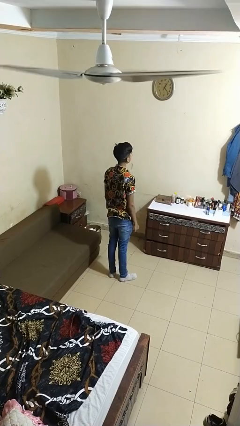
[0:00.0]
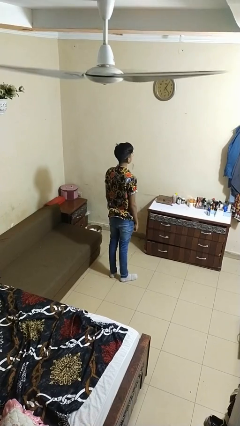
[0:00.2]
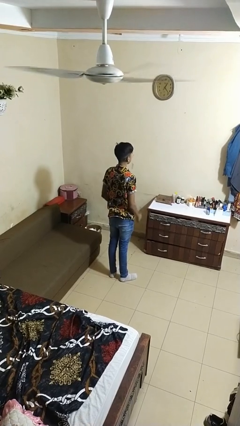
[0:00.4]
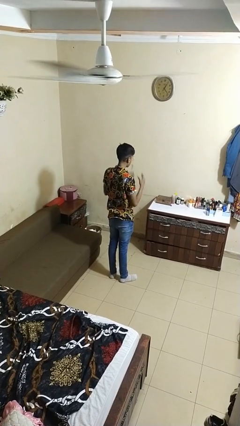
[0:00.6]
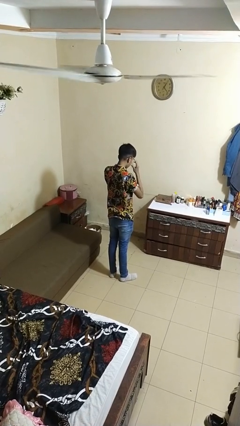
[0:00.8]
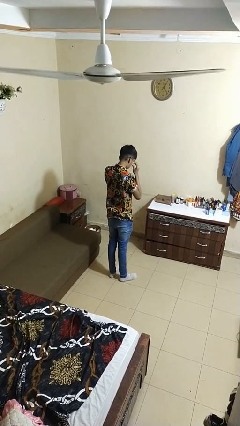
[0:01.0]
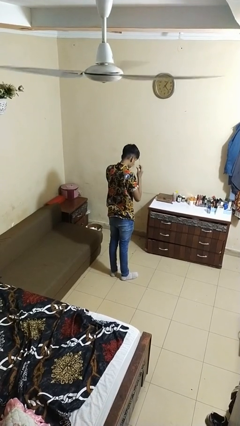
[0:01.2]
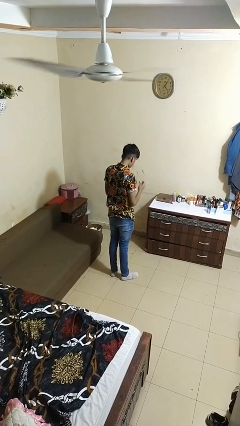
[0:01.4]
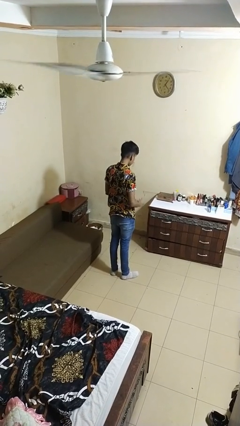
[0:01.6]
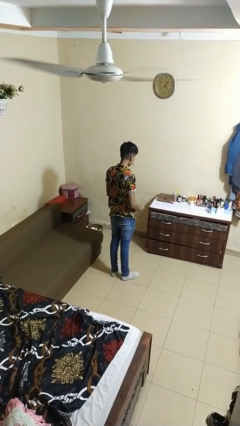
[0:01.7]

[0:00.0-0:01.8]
person takes off glasses

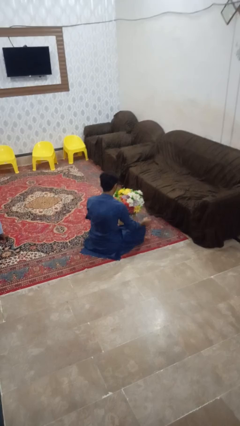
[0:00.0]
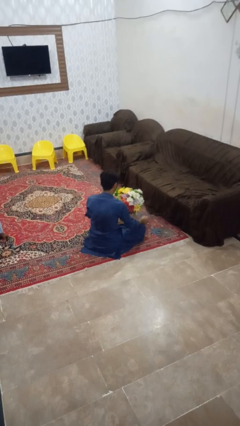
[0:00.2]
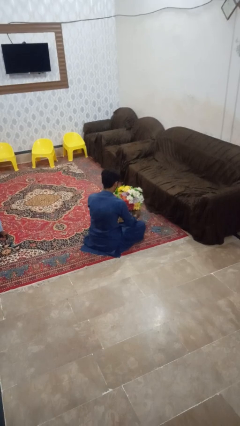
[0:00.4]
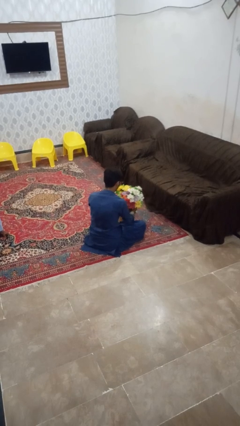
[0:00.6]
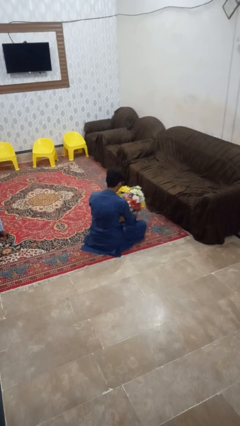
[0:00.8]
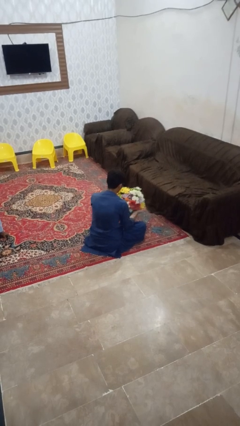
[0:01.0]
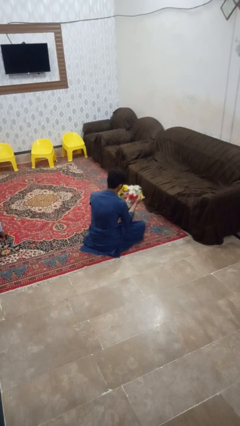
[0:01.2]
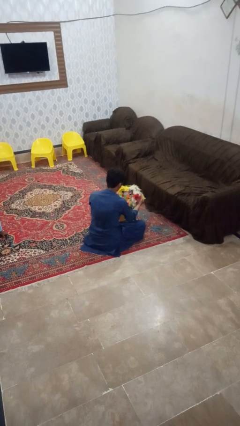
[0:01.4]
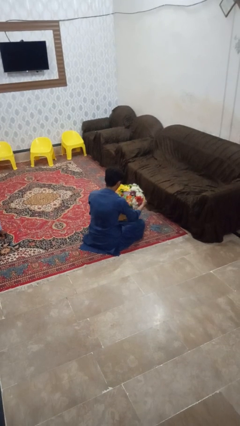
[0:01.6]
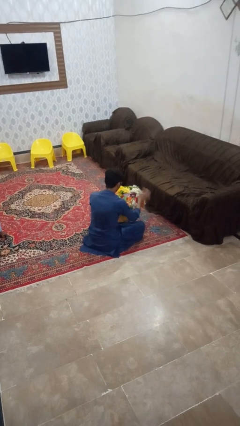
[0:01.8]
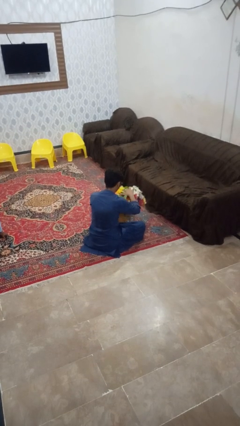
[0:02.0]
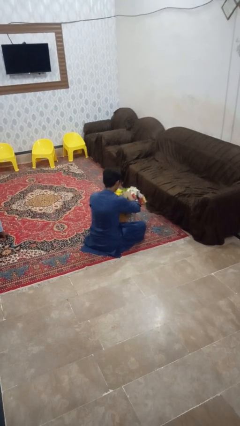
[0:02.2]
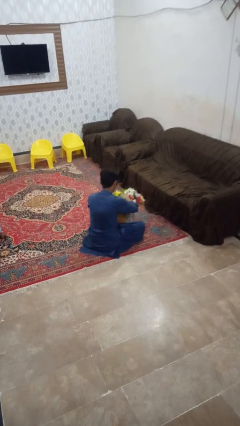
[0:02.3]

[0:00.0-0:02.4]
person arranges flowers in vase

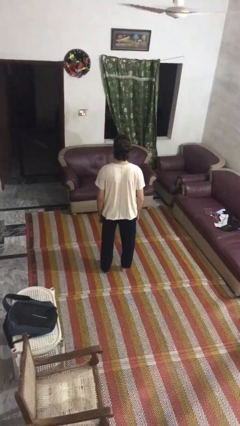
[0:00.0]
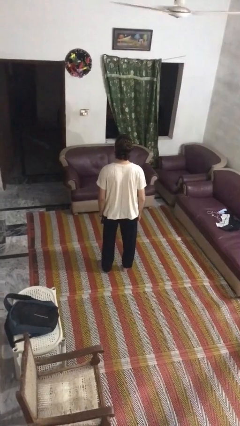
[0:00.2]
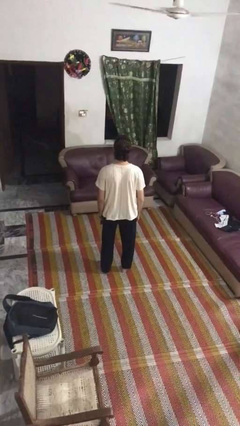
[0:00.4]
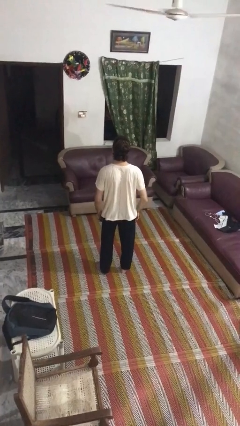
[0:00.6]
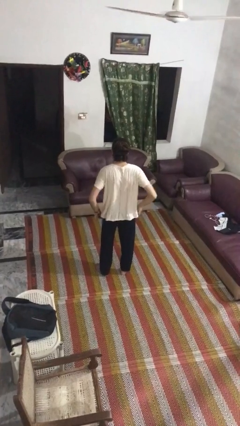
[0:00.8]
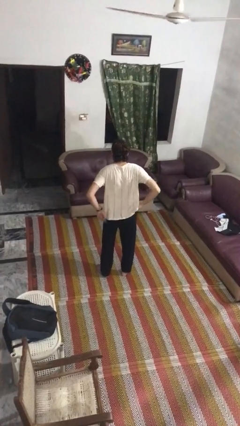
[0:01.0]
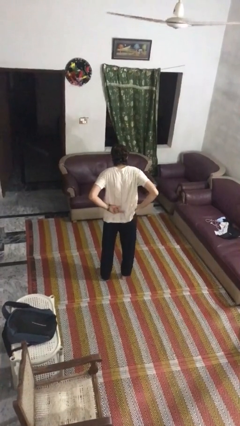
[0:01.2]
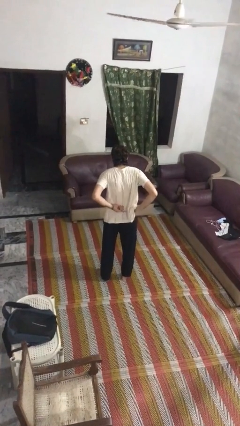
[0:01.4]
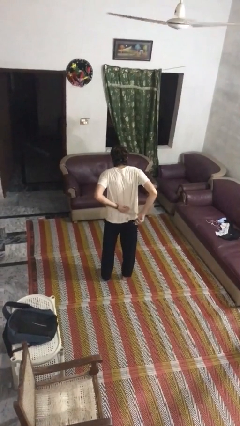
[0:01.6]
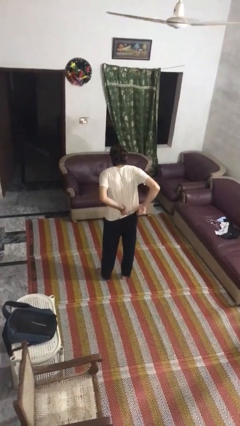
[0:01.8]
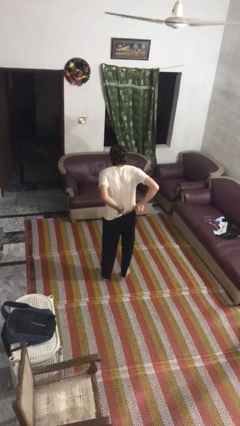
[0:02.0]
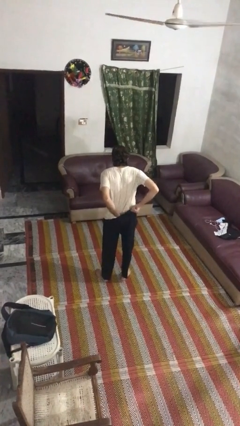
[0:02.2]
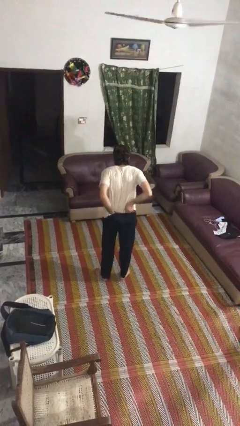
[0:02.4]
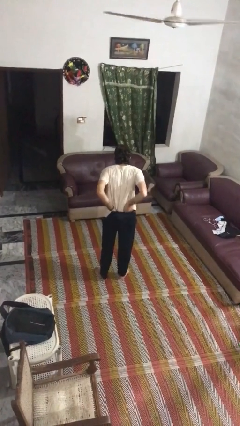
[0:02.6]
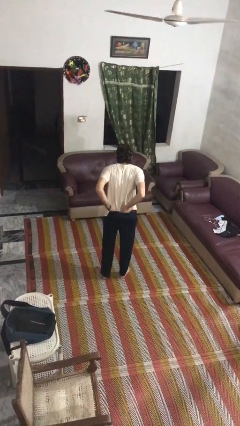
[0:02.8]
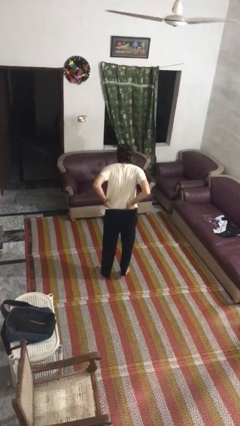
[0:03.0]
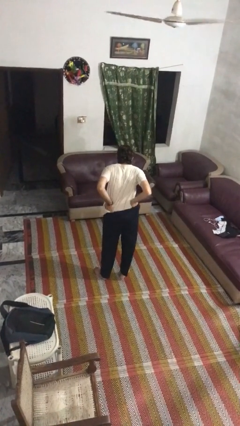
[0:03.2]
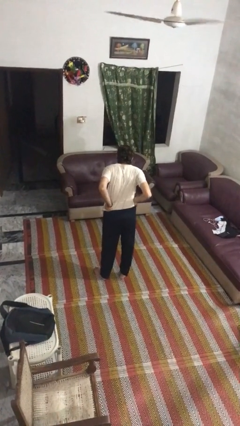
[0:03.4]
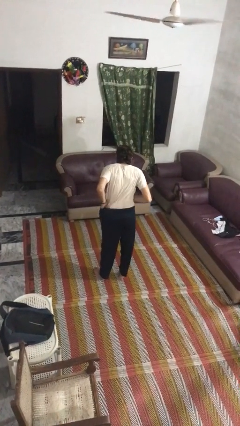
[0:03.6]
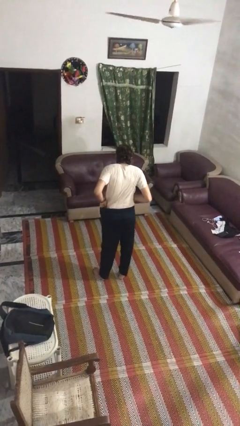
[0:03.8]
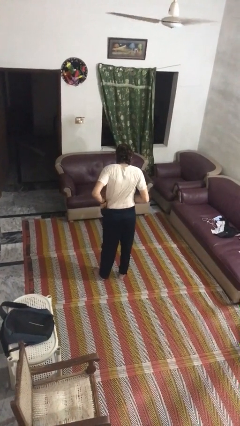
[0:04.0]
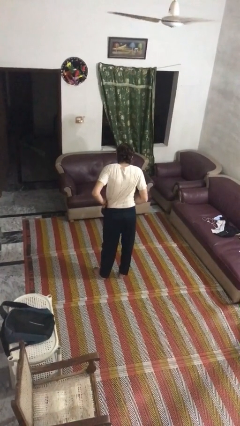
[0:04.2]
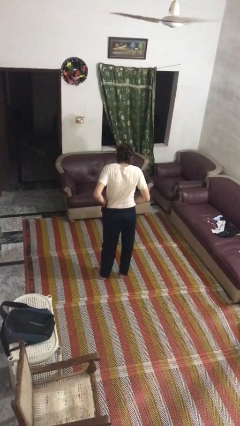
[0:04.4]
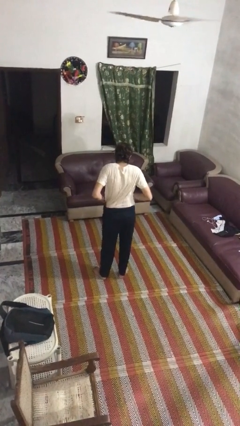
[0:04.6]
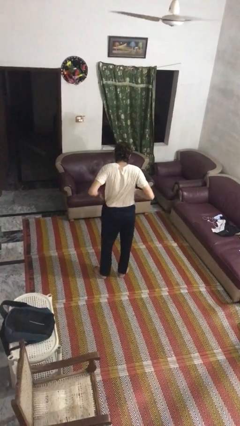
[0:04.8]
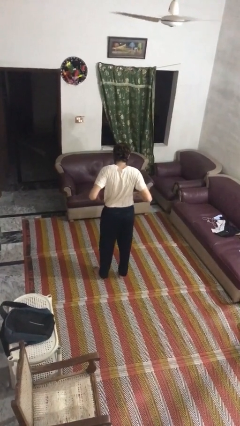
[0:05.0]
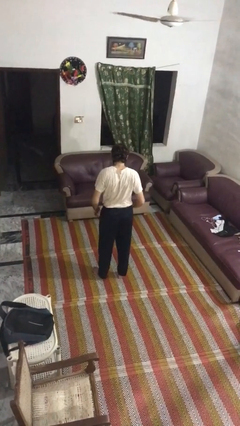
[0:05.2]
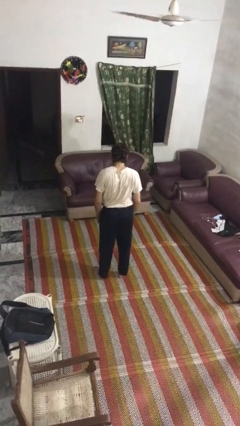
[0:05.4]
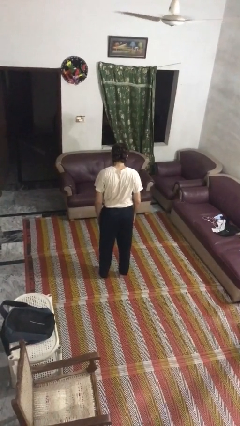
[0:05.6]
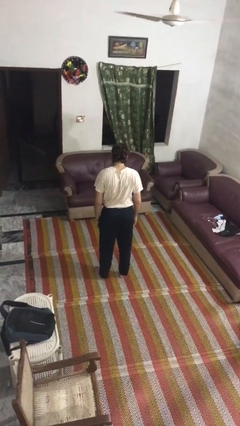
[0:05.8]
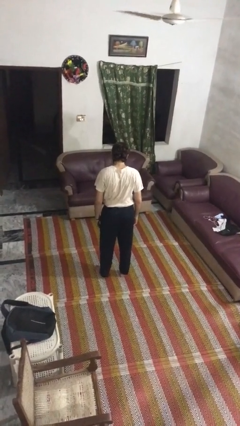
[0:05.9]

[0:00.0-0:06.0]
person tucks in shirt

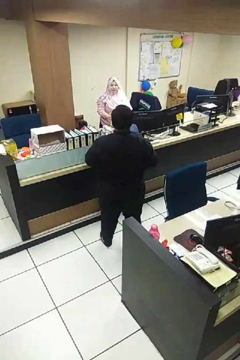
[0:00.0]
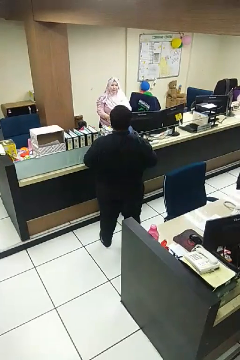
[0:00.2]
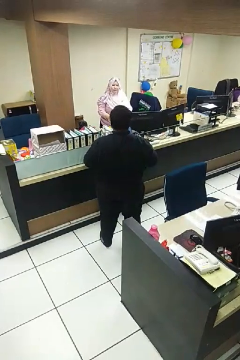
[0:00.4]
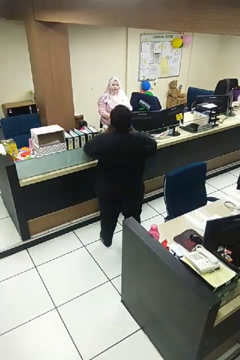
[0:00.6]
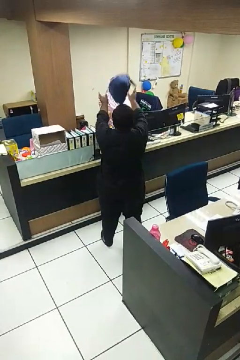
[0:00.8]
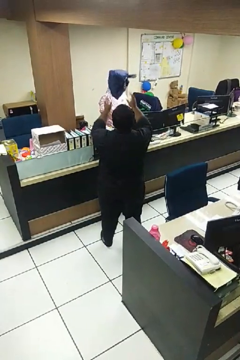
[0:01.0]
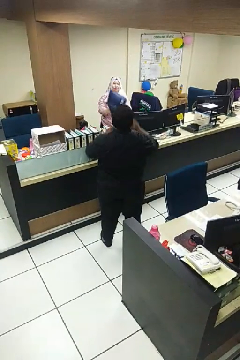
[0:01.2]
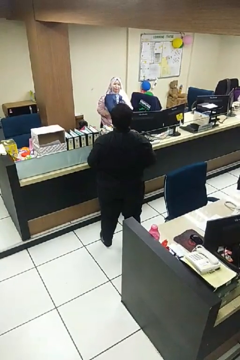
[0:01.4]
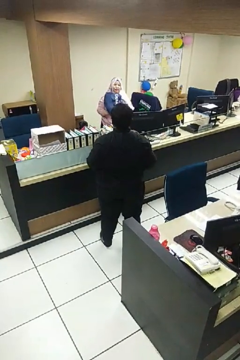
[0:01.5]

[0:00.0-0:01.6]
person throws object to person

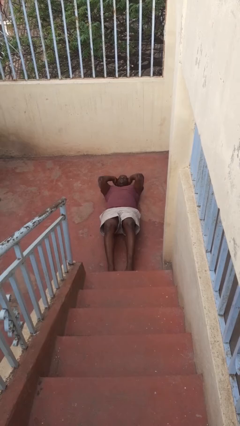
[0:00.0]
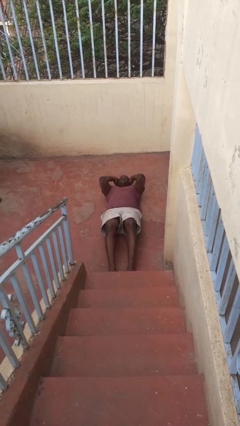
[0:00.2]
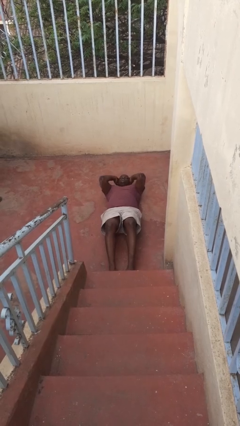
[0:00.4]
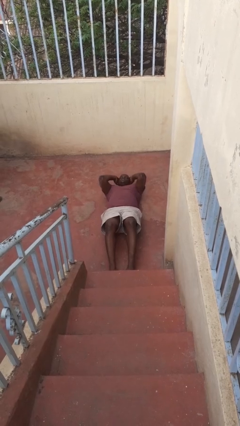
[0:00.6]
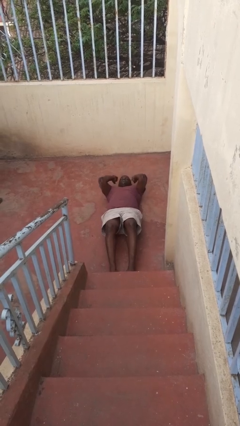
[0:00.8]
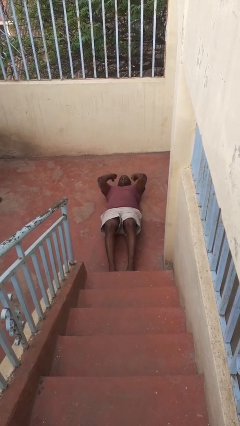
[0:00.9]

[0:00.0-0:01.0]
person exercises with situp

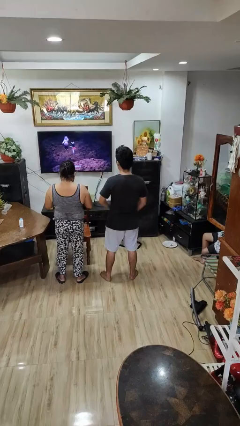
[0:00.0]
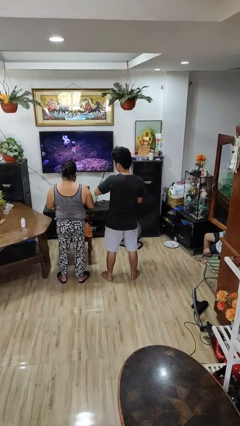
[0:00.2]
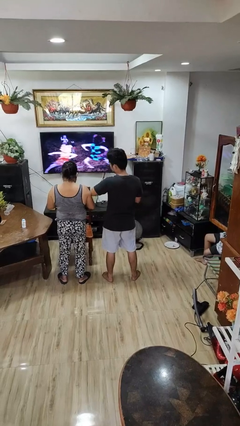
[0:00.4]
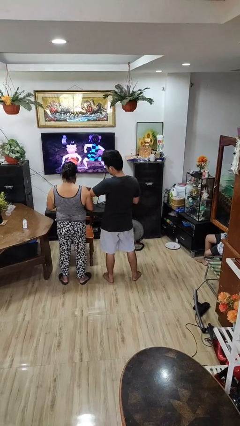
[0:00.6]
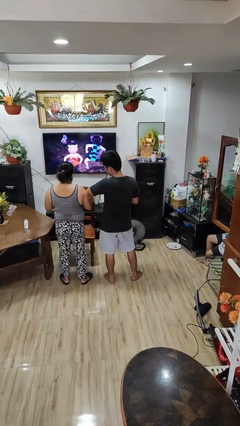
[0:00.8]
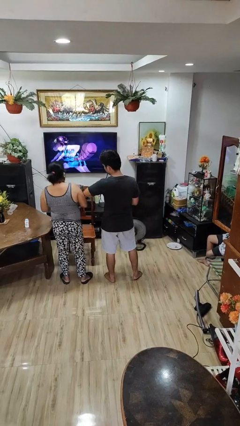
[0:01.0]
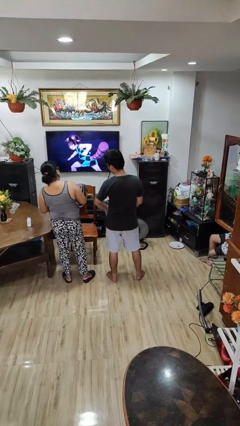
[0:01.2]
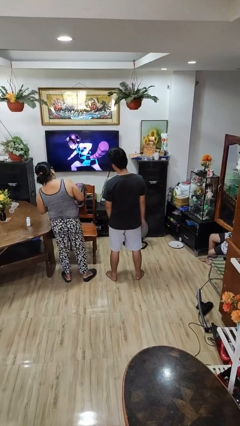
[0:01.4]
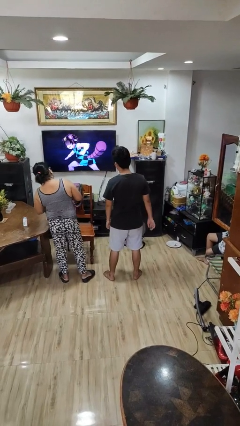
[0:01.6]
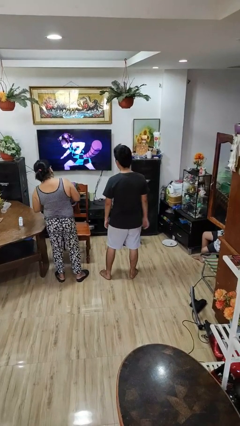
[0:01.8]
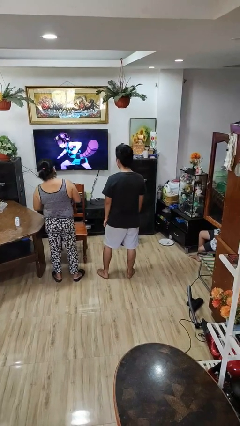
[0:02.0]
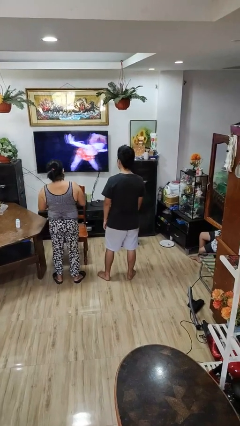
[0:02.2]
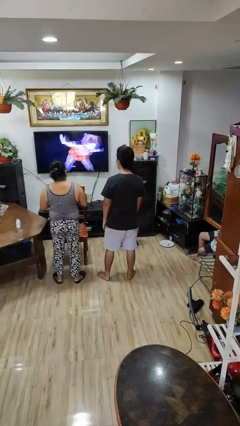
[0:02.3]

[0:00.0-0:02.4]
person shoves person

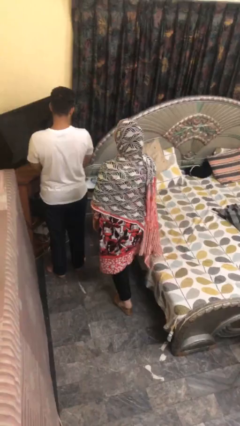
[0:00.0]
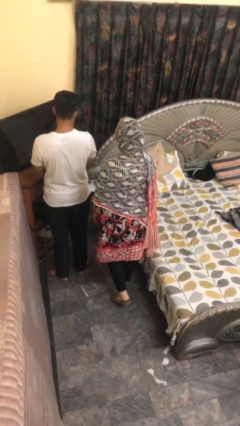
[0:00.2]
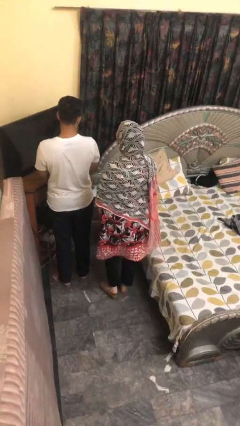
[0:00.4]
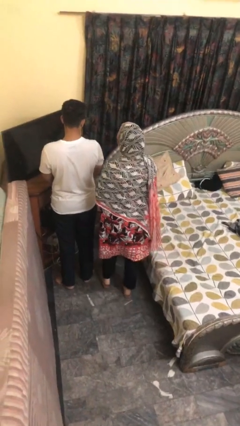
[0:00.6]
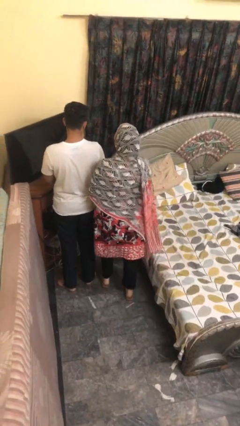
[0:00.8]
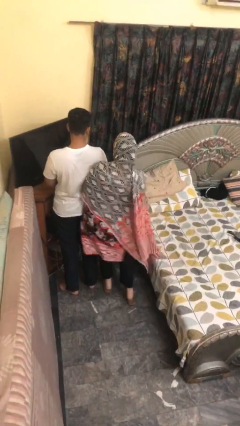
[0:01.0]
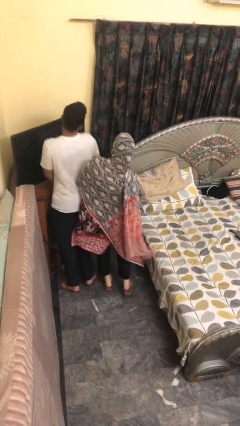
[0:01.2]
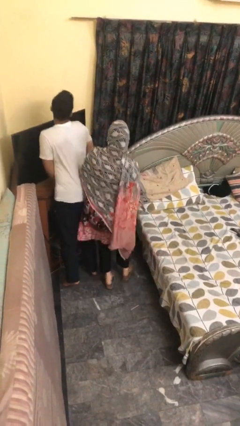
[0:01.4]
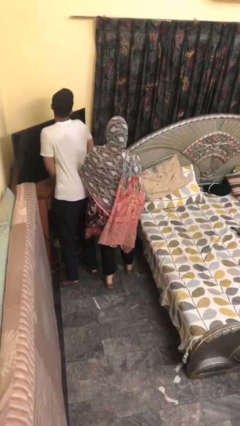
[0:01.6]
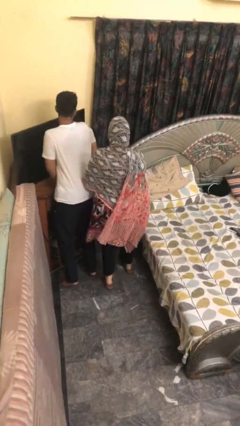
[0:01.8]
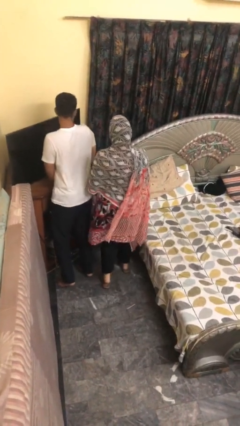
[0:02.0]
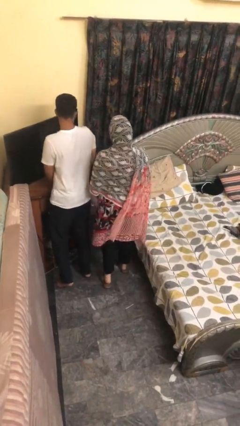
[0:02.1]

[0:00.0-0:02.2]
person bumps into person
